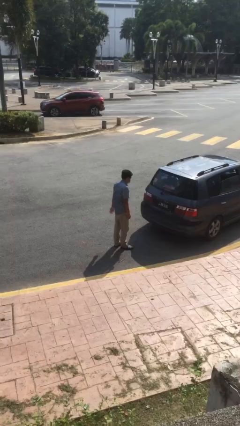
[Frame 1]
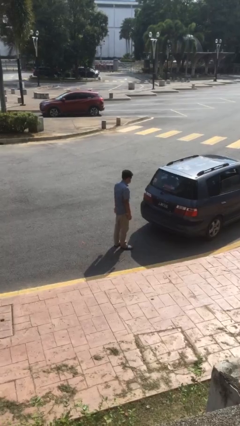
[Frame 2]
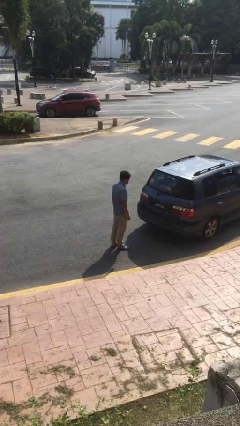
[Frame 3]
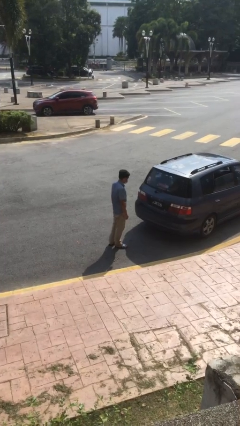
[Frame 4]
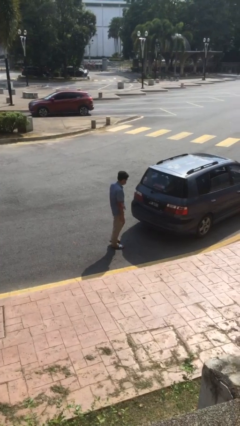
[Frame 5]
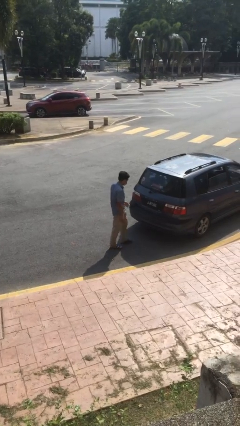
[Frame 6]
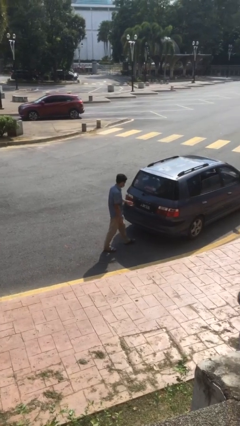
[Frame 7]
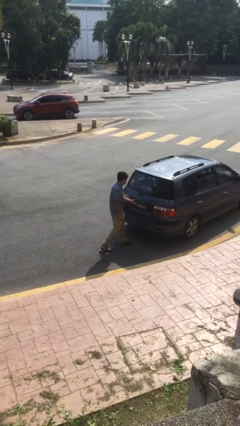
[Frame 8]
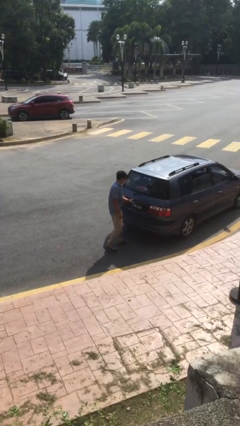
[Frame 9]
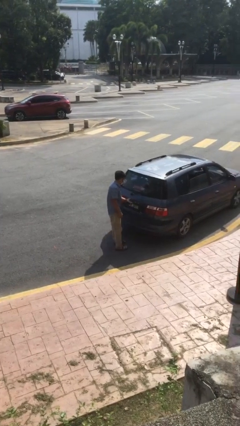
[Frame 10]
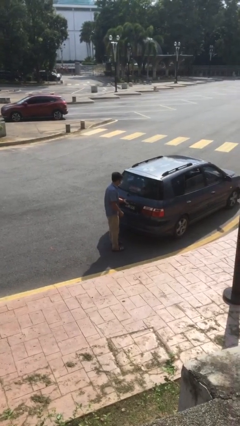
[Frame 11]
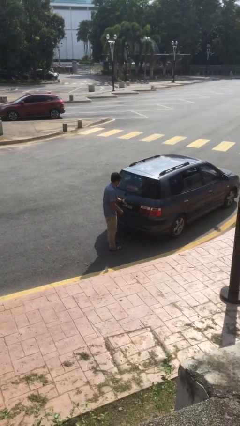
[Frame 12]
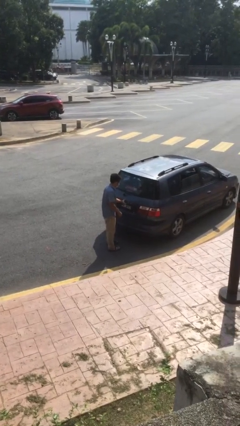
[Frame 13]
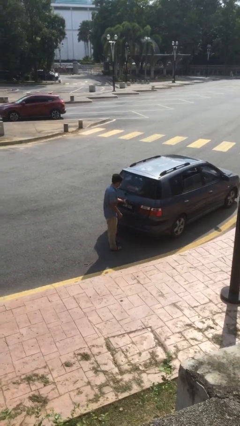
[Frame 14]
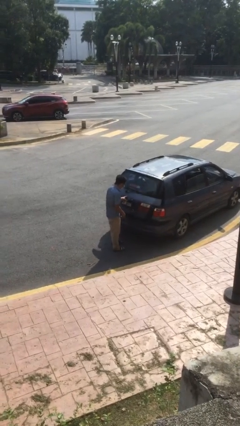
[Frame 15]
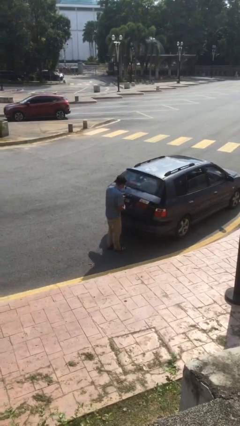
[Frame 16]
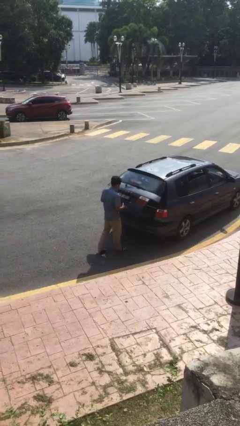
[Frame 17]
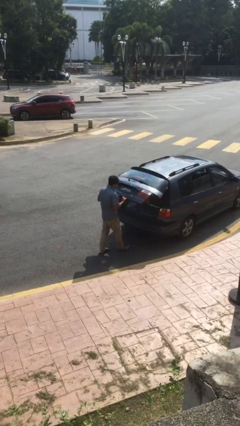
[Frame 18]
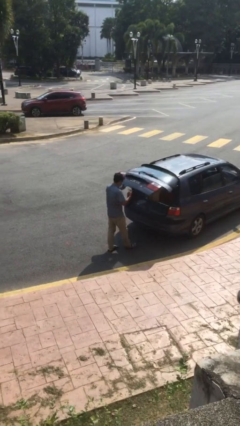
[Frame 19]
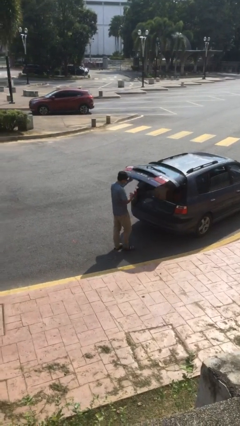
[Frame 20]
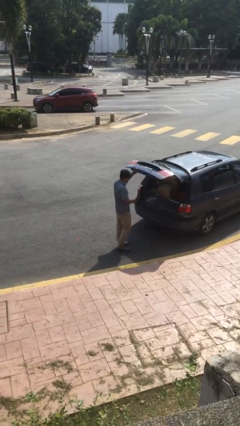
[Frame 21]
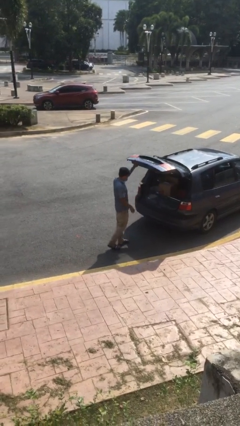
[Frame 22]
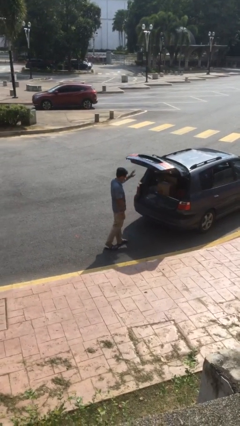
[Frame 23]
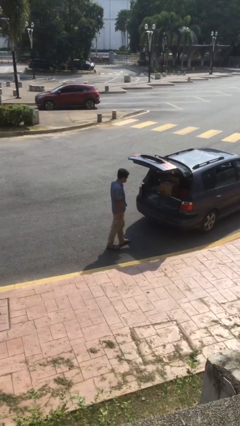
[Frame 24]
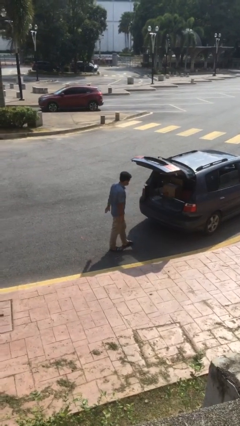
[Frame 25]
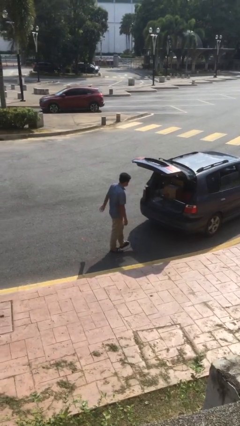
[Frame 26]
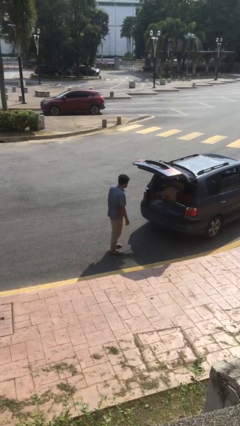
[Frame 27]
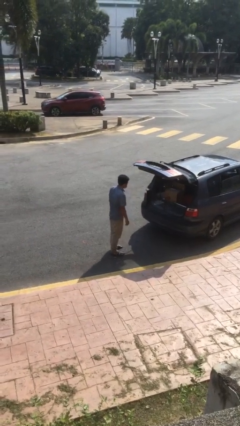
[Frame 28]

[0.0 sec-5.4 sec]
person opens car trunk

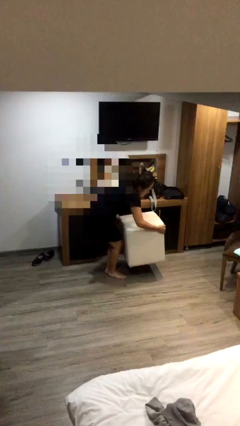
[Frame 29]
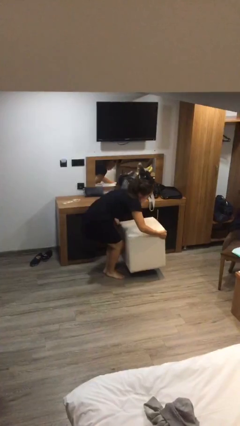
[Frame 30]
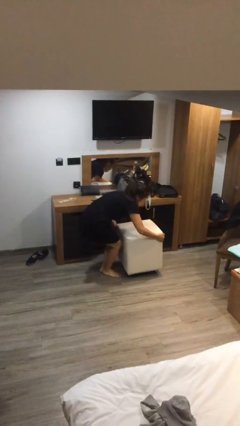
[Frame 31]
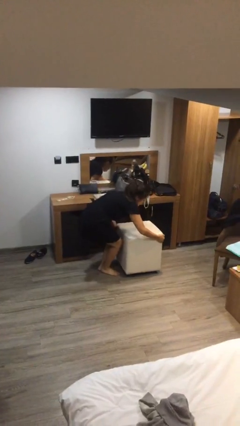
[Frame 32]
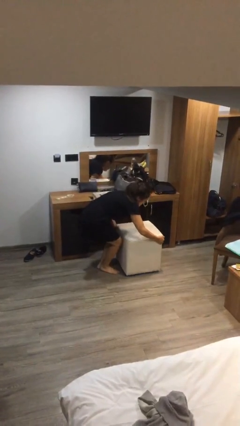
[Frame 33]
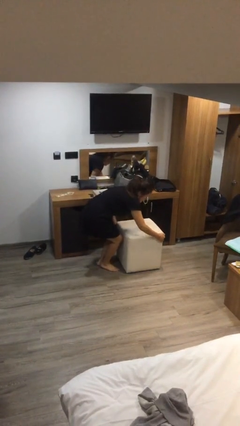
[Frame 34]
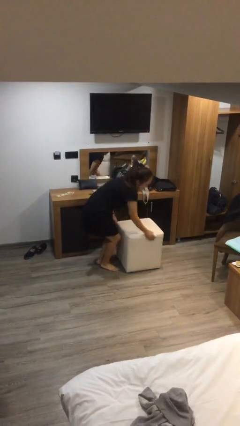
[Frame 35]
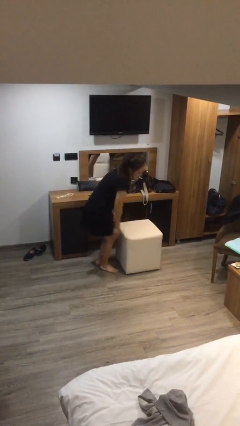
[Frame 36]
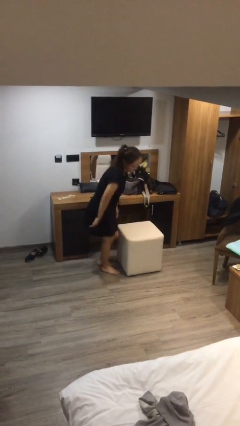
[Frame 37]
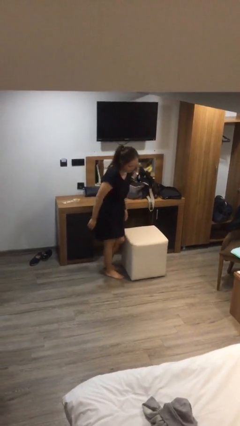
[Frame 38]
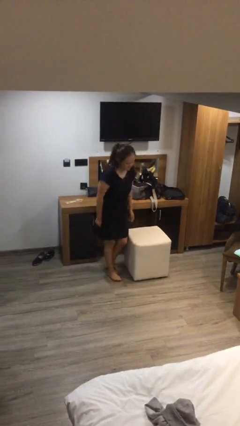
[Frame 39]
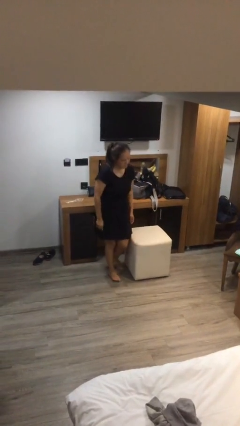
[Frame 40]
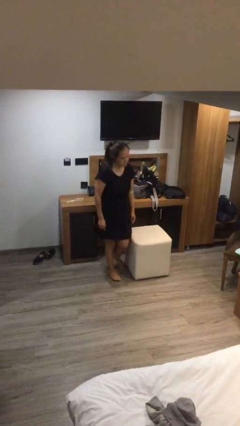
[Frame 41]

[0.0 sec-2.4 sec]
person puts down object on floor

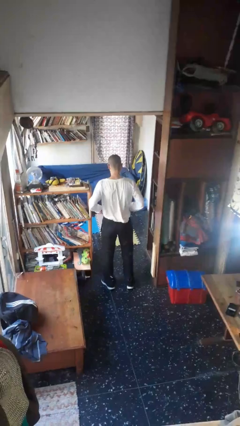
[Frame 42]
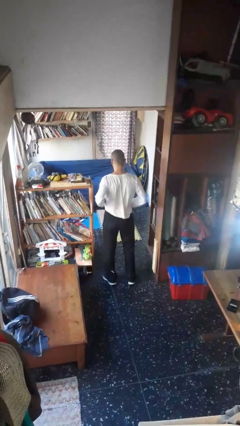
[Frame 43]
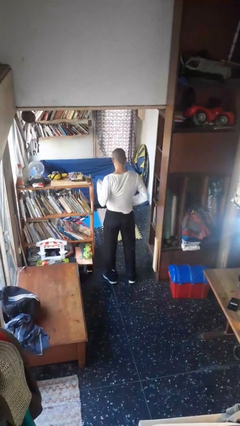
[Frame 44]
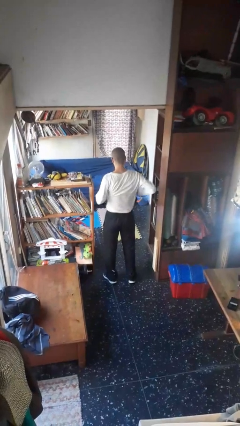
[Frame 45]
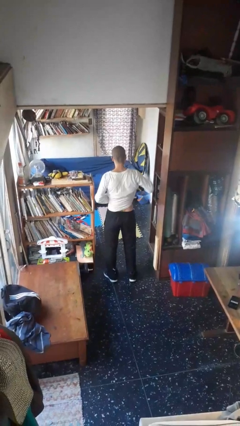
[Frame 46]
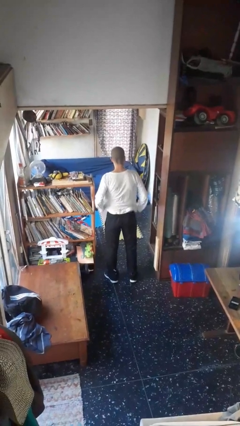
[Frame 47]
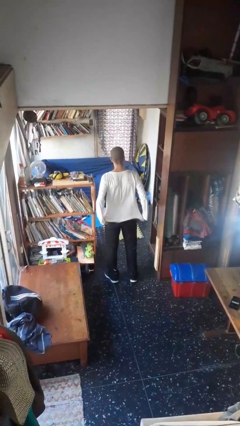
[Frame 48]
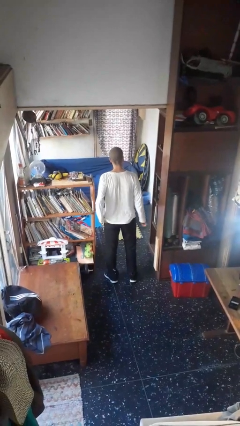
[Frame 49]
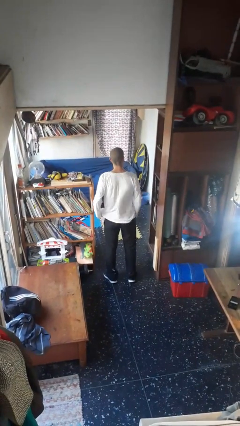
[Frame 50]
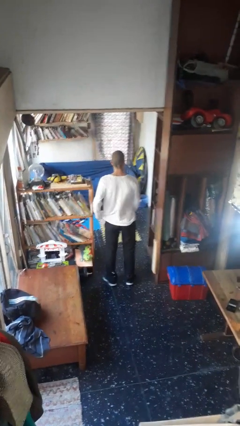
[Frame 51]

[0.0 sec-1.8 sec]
person untucks shirt

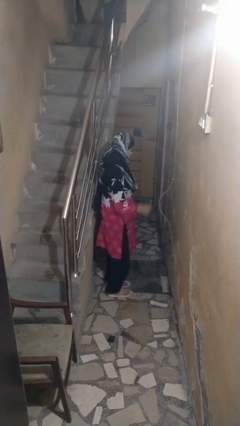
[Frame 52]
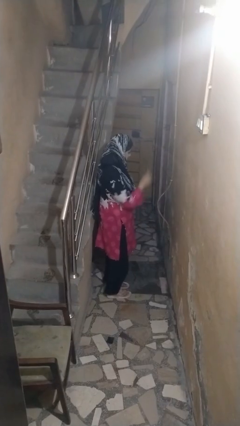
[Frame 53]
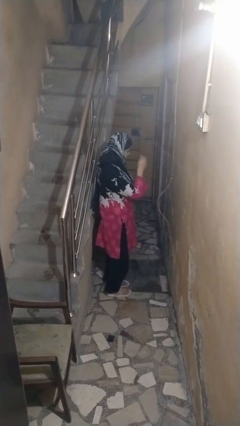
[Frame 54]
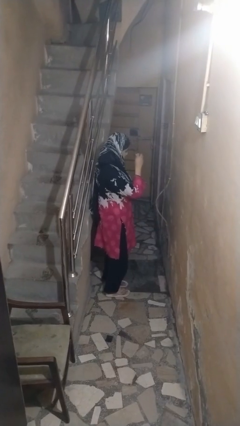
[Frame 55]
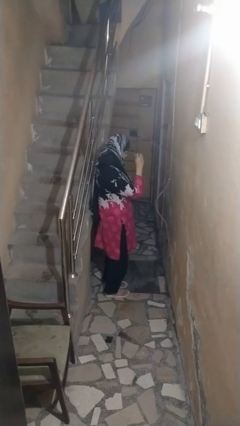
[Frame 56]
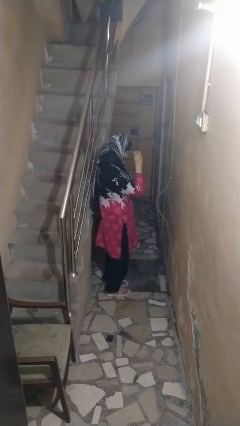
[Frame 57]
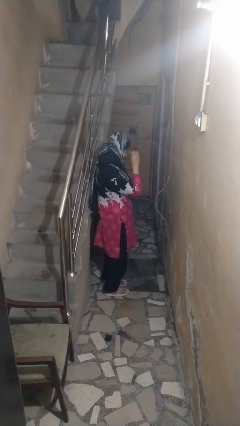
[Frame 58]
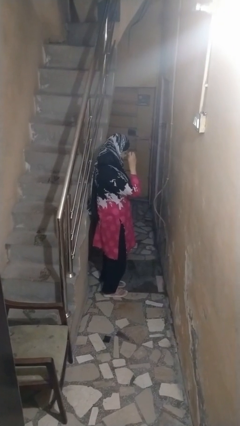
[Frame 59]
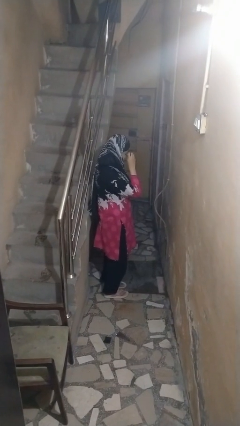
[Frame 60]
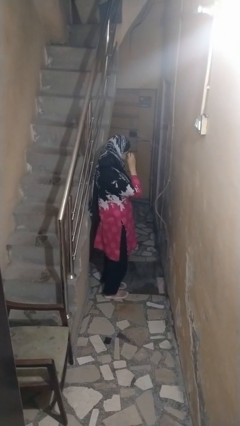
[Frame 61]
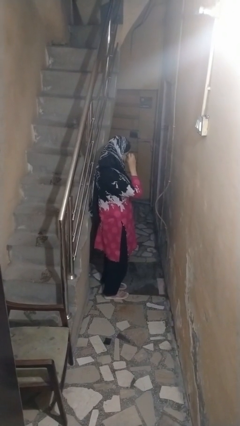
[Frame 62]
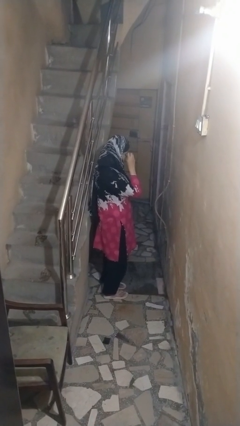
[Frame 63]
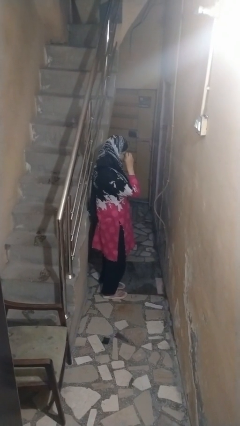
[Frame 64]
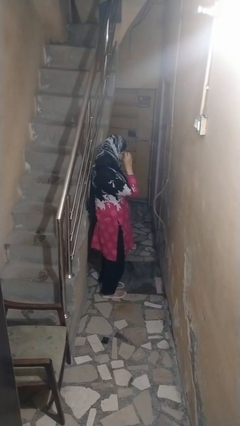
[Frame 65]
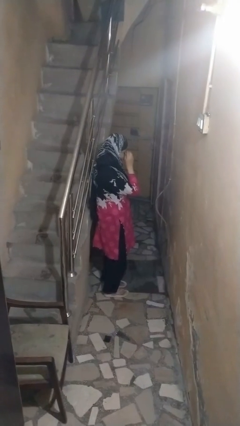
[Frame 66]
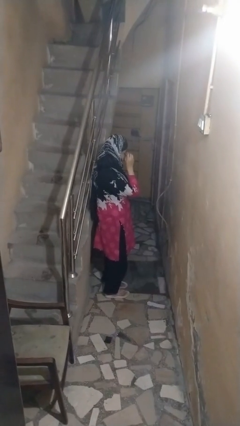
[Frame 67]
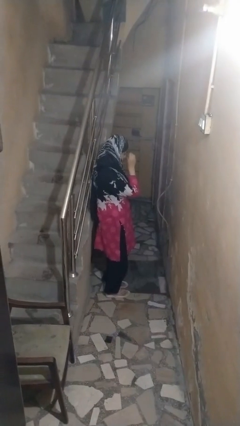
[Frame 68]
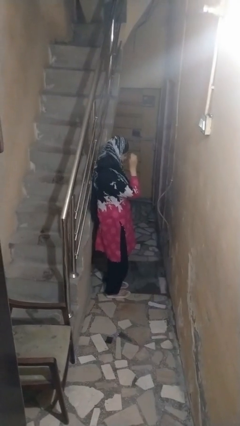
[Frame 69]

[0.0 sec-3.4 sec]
person puts on glasses

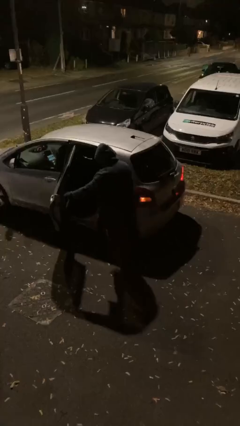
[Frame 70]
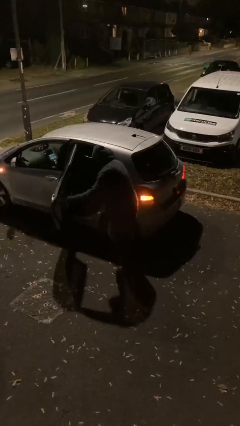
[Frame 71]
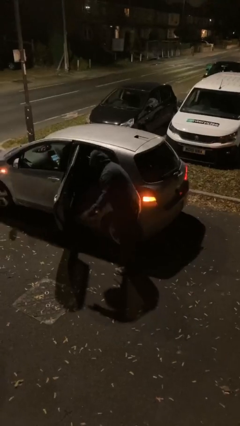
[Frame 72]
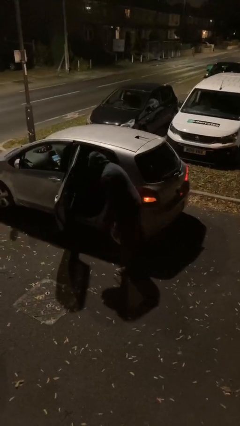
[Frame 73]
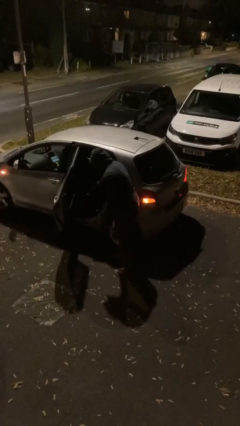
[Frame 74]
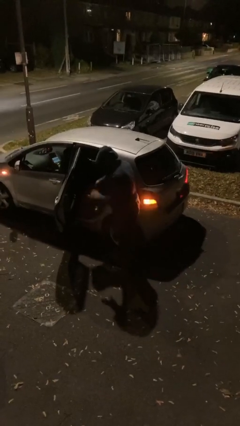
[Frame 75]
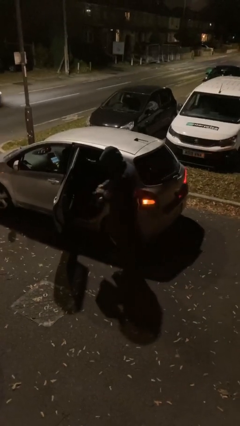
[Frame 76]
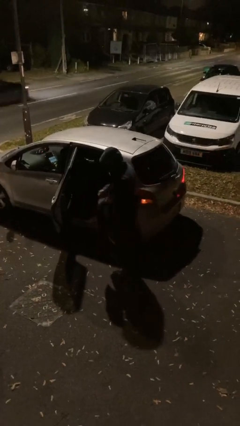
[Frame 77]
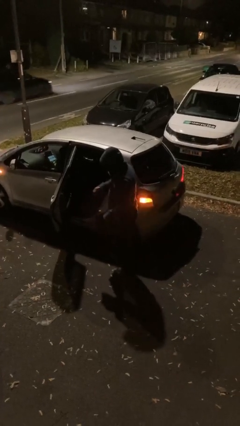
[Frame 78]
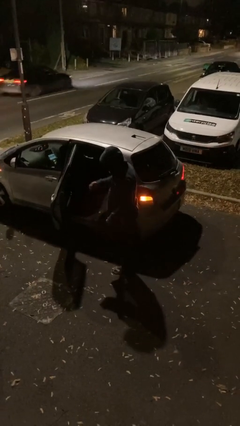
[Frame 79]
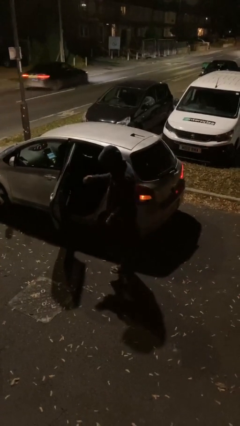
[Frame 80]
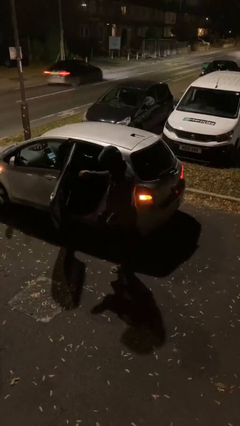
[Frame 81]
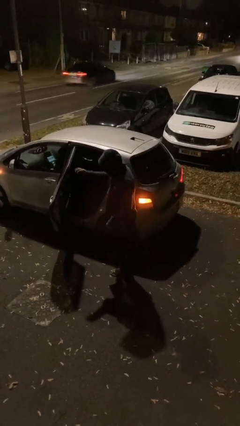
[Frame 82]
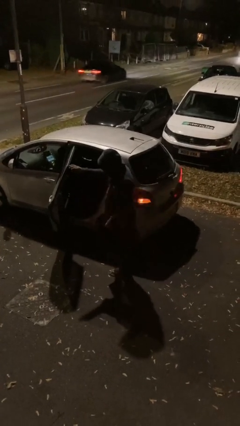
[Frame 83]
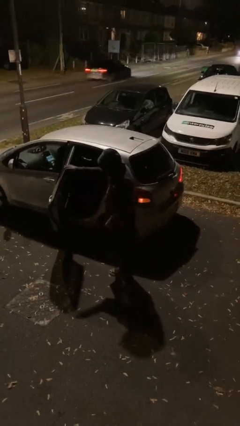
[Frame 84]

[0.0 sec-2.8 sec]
person unloads car

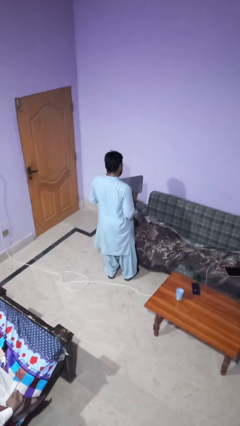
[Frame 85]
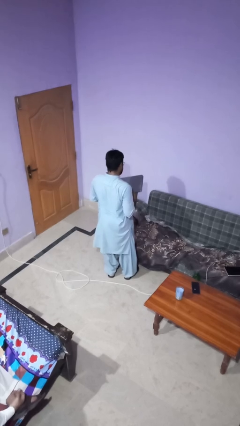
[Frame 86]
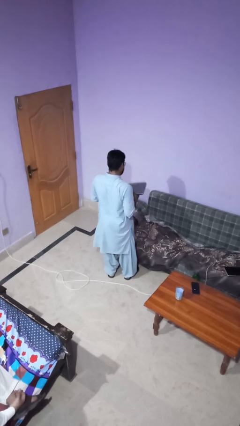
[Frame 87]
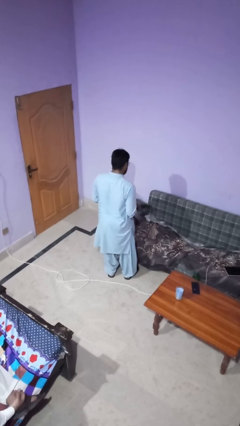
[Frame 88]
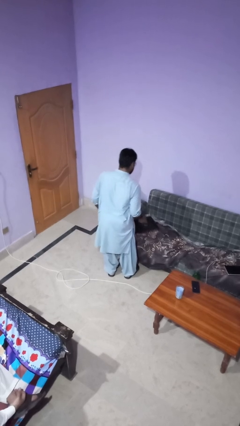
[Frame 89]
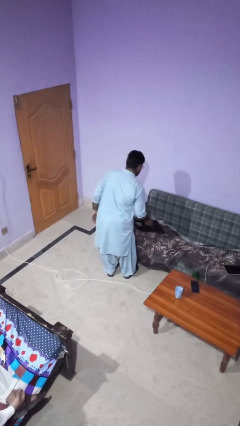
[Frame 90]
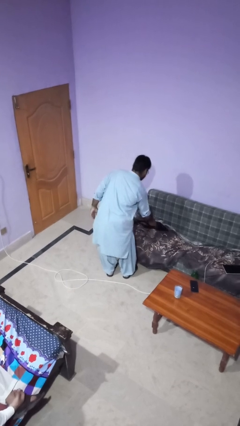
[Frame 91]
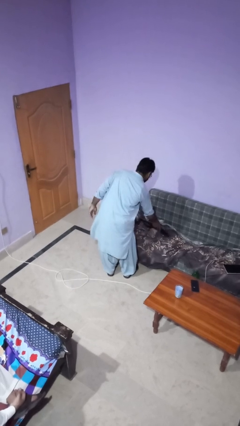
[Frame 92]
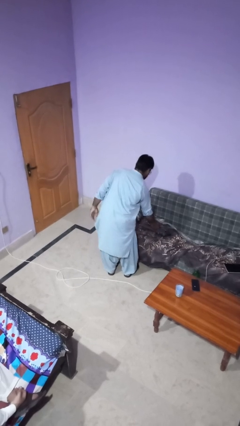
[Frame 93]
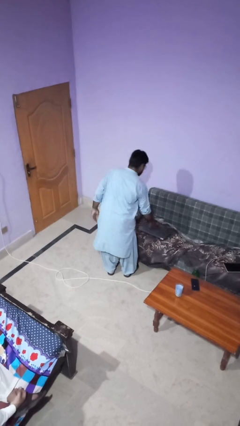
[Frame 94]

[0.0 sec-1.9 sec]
person puts down object on couch

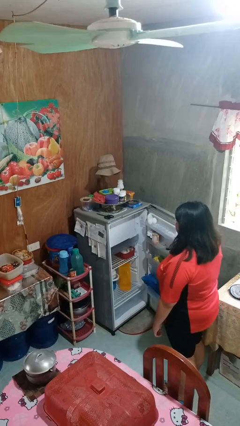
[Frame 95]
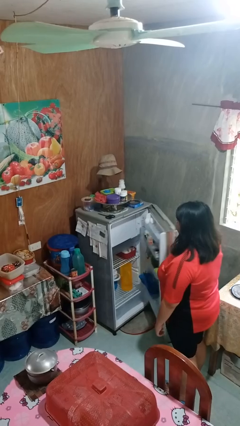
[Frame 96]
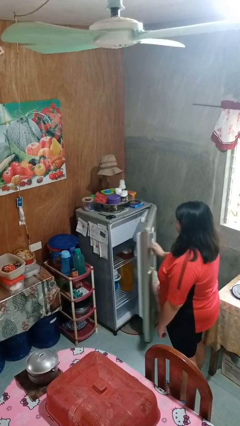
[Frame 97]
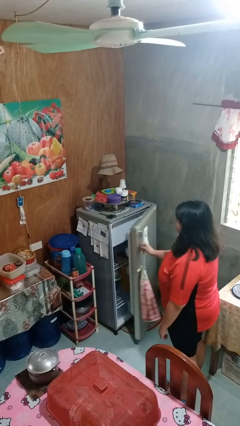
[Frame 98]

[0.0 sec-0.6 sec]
person closes refrigerator